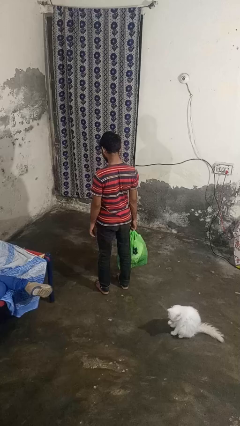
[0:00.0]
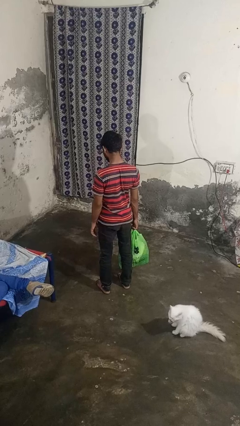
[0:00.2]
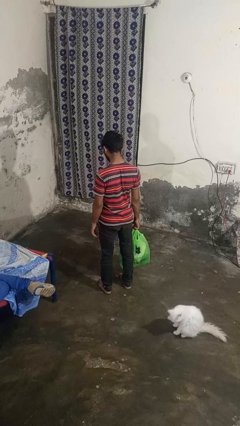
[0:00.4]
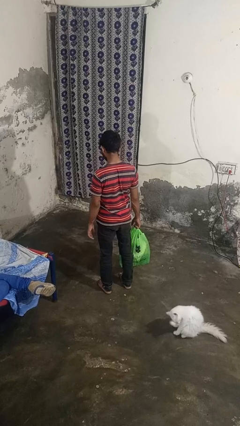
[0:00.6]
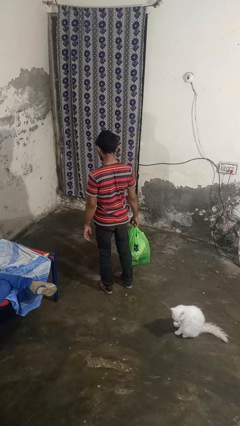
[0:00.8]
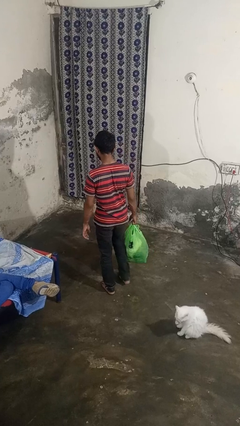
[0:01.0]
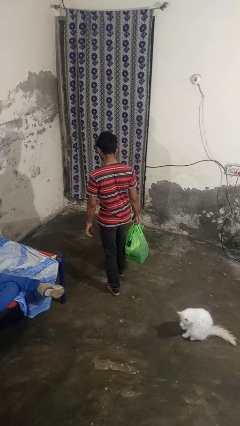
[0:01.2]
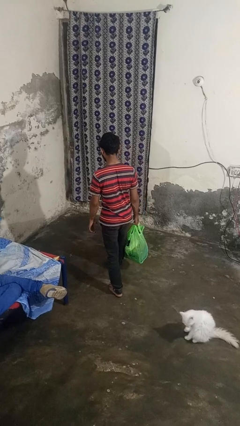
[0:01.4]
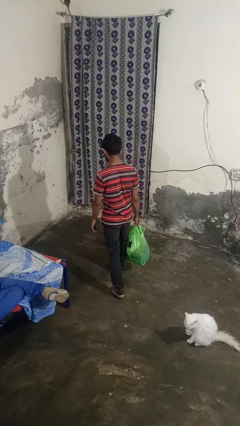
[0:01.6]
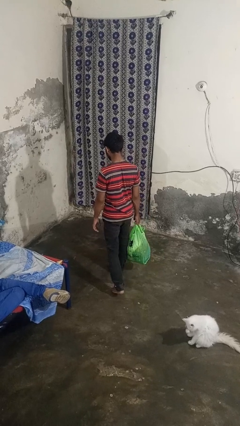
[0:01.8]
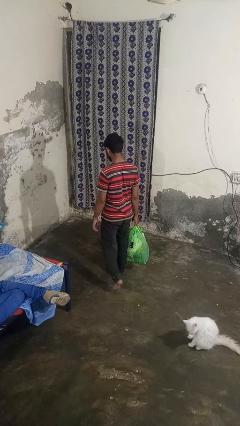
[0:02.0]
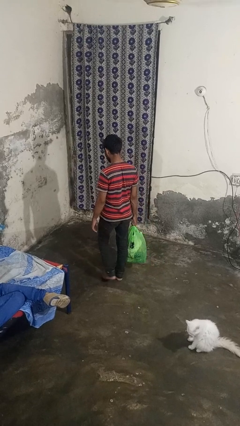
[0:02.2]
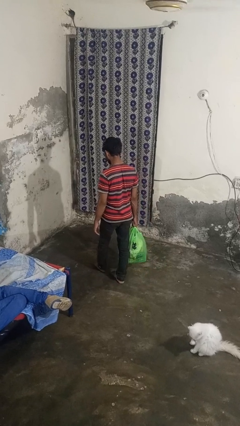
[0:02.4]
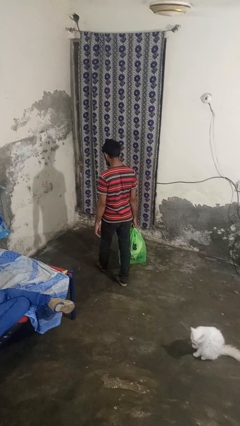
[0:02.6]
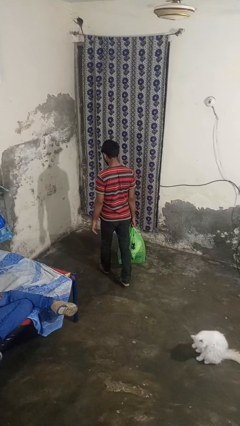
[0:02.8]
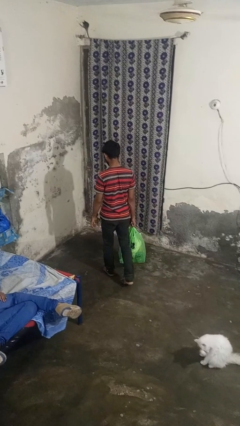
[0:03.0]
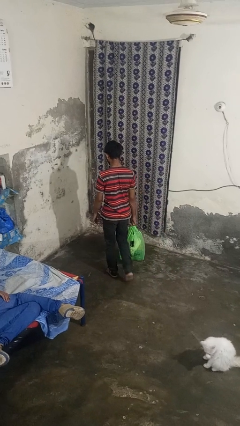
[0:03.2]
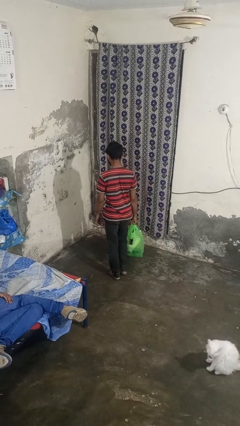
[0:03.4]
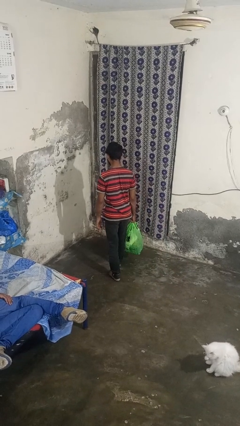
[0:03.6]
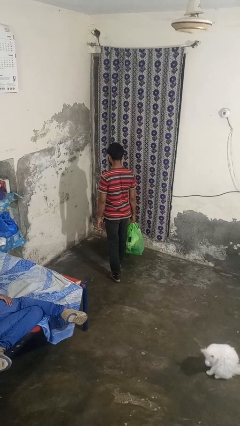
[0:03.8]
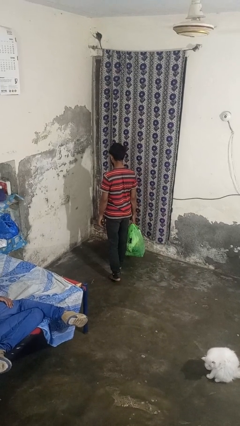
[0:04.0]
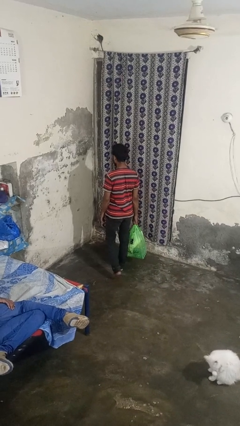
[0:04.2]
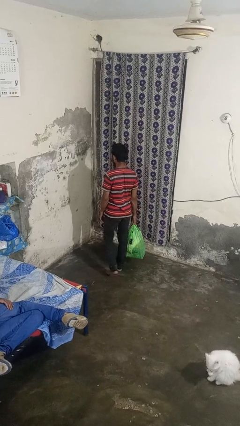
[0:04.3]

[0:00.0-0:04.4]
person carries groceries

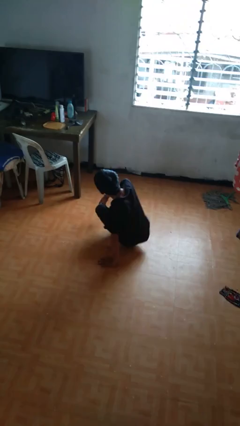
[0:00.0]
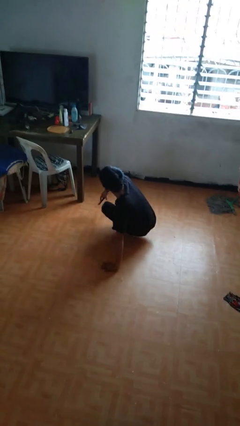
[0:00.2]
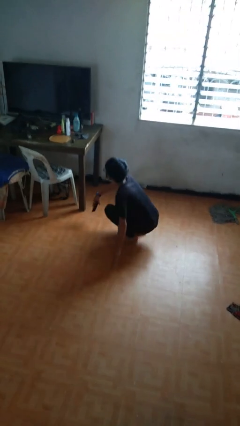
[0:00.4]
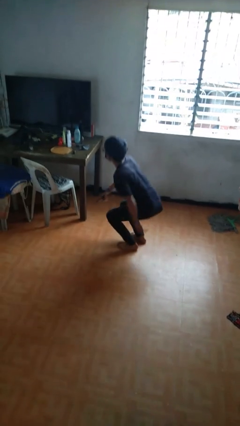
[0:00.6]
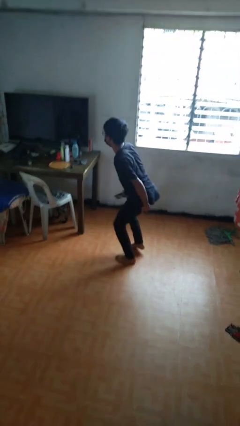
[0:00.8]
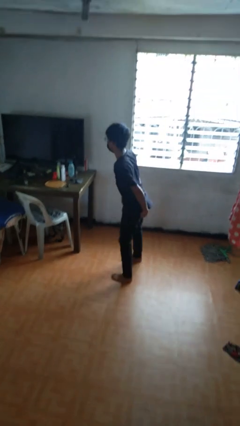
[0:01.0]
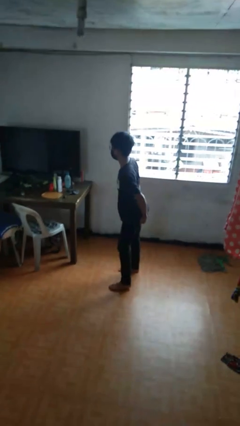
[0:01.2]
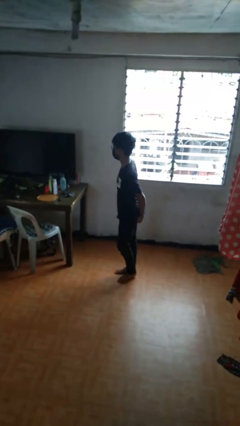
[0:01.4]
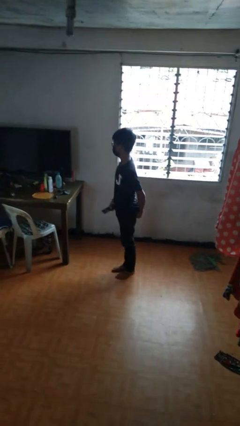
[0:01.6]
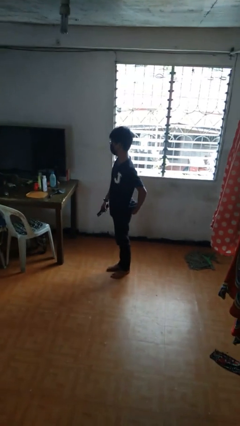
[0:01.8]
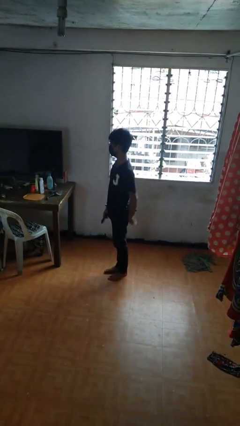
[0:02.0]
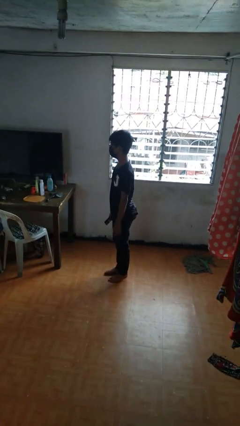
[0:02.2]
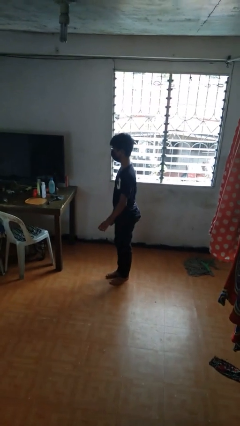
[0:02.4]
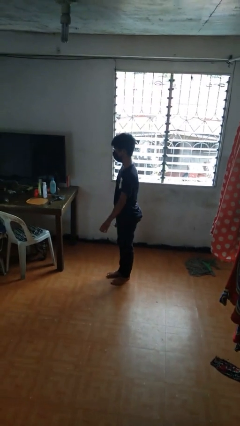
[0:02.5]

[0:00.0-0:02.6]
person stands up from floor

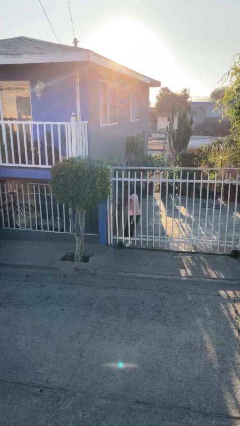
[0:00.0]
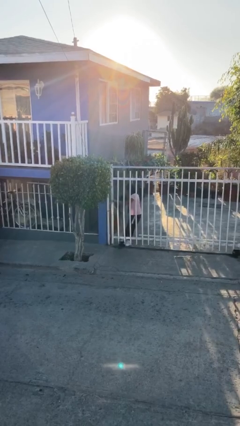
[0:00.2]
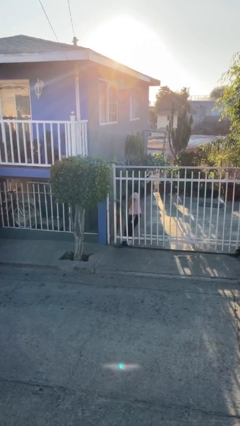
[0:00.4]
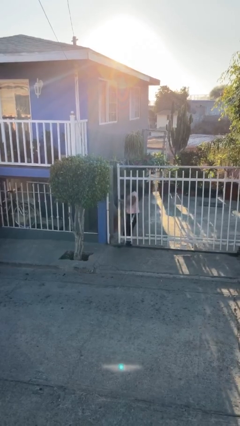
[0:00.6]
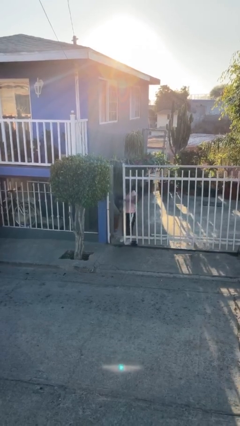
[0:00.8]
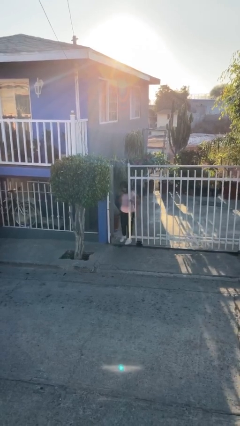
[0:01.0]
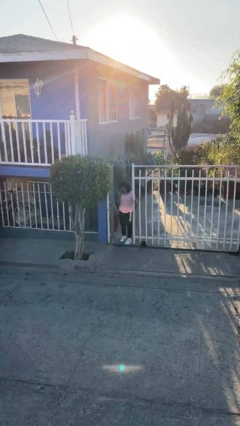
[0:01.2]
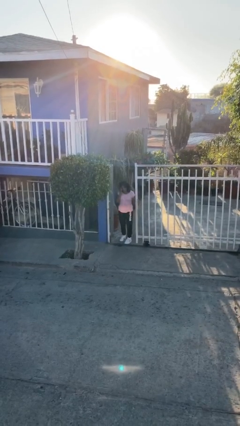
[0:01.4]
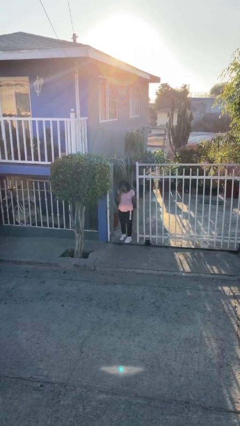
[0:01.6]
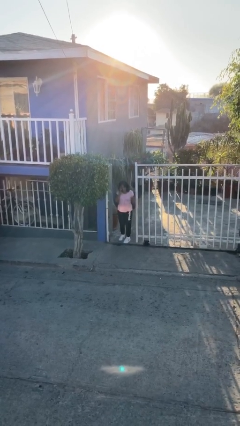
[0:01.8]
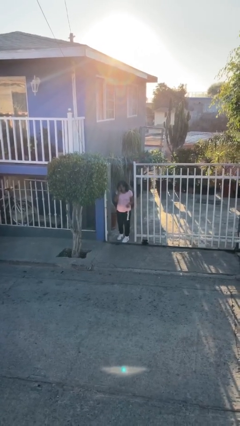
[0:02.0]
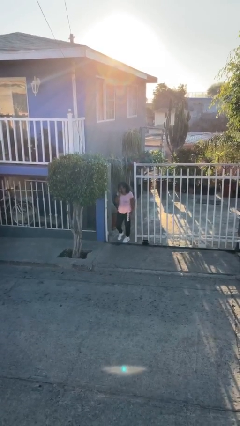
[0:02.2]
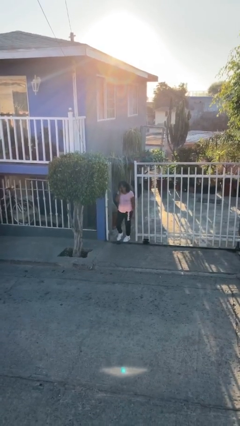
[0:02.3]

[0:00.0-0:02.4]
person opens facility door

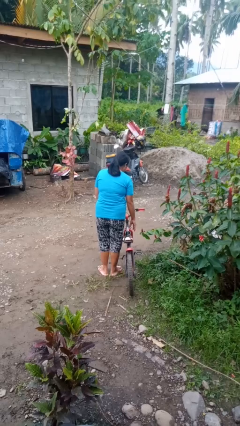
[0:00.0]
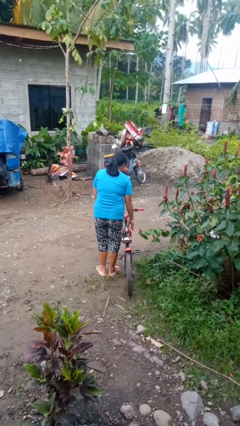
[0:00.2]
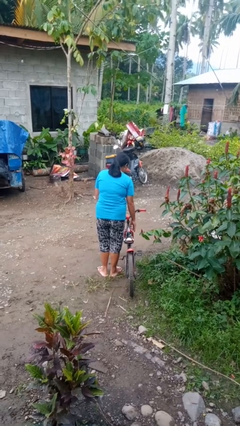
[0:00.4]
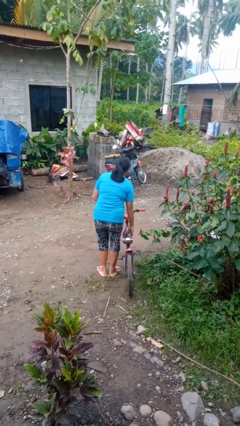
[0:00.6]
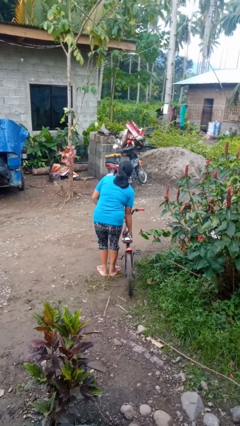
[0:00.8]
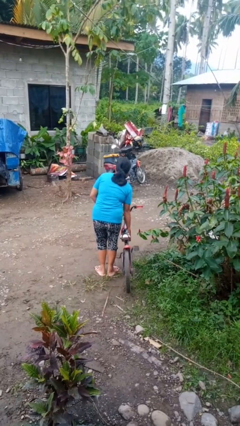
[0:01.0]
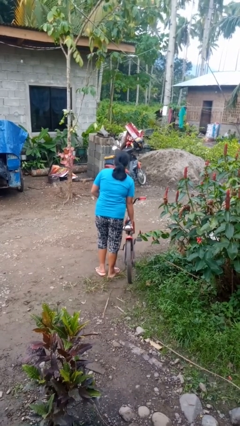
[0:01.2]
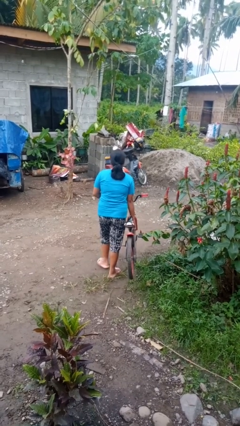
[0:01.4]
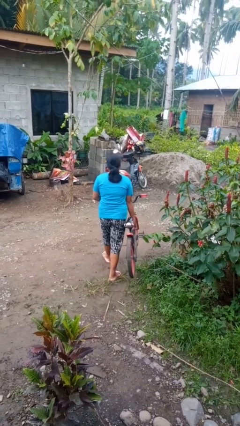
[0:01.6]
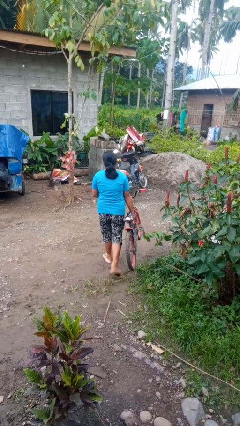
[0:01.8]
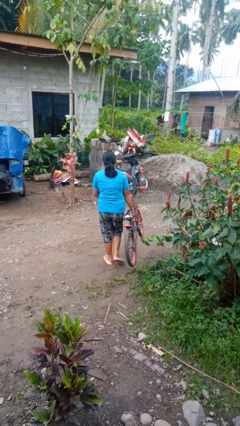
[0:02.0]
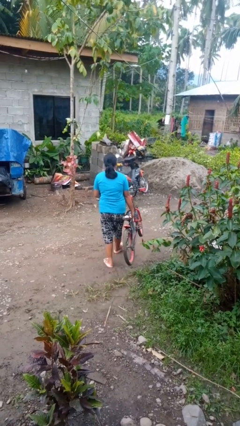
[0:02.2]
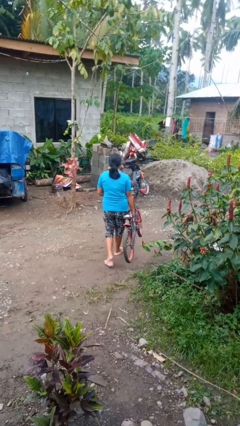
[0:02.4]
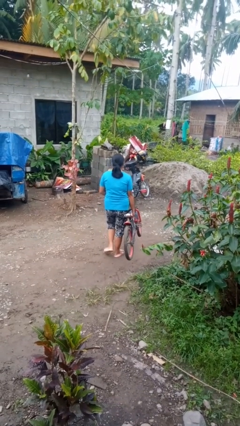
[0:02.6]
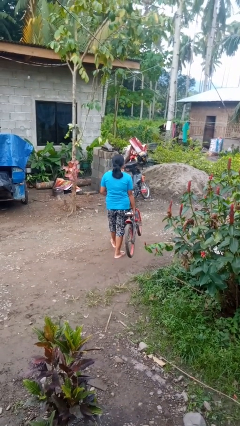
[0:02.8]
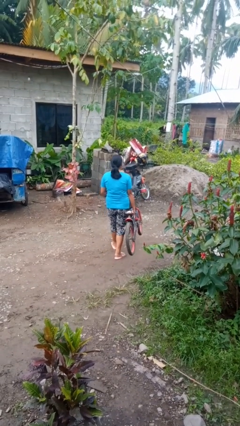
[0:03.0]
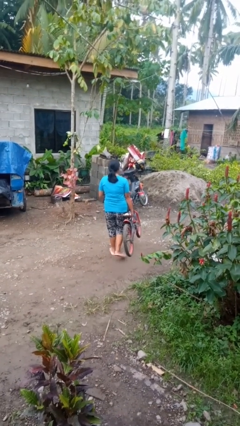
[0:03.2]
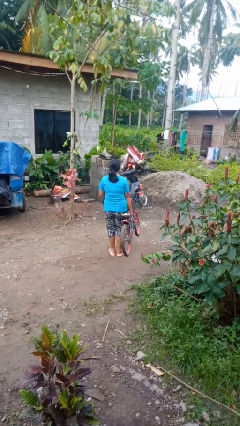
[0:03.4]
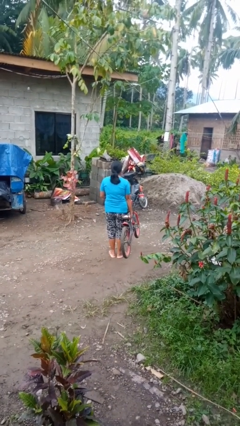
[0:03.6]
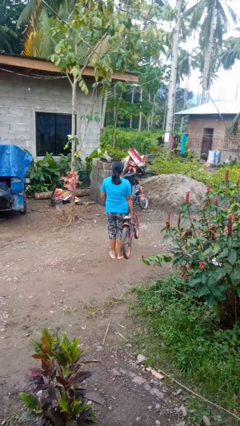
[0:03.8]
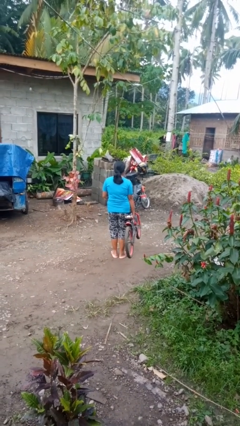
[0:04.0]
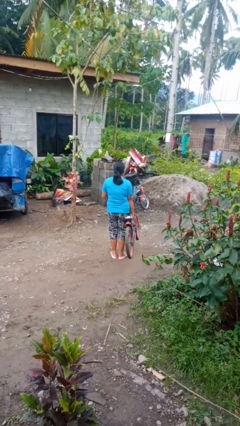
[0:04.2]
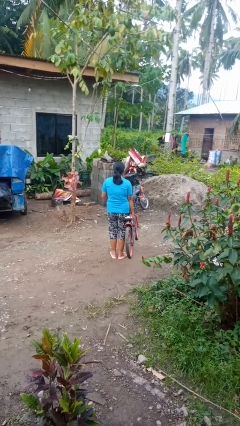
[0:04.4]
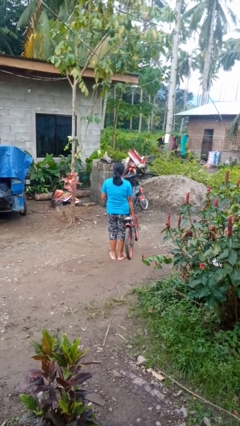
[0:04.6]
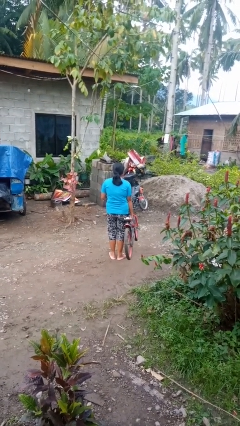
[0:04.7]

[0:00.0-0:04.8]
person carries bicycle

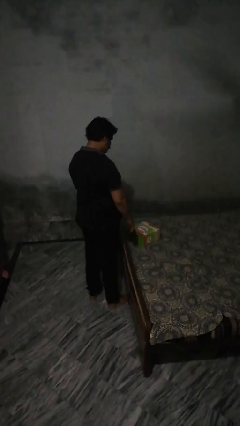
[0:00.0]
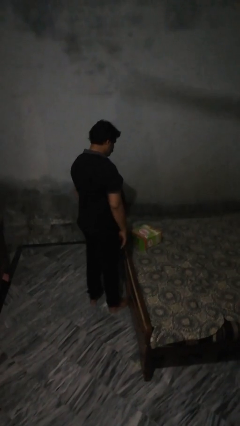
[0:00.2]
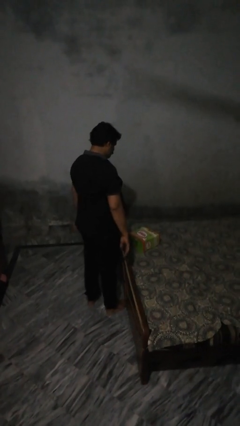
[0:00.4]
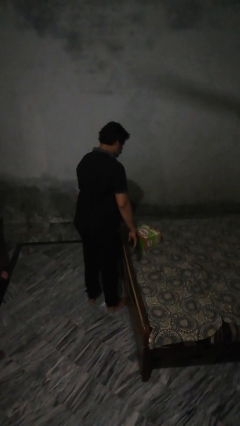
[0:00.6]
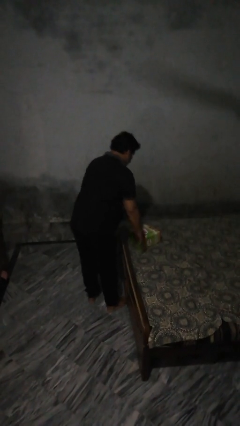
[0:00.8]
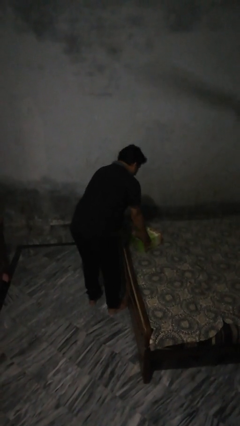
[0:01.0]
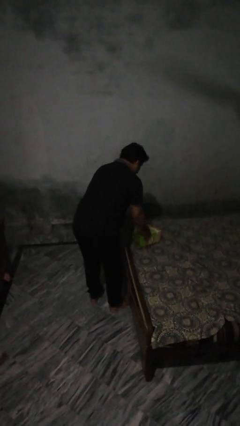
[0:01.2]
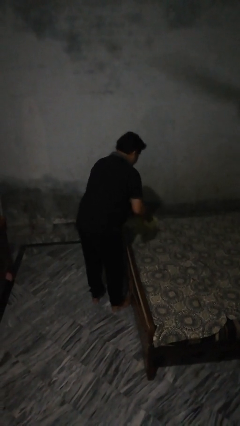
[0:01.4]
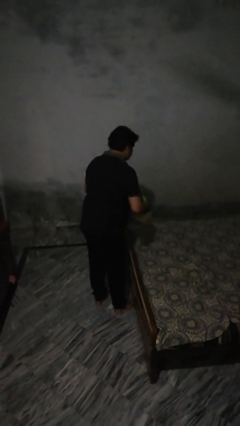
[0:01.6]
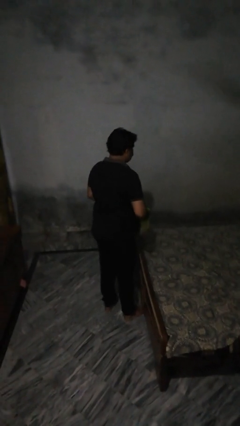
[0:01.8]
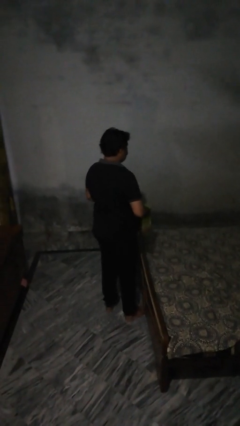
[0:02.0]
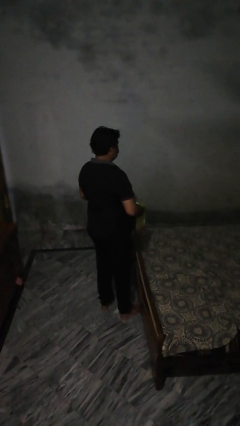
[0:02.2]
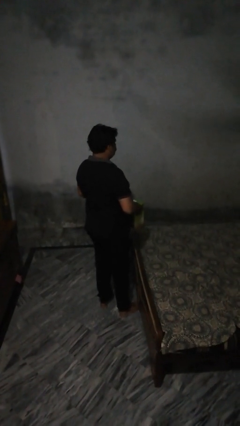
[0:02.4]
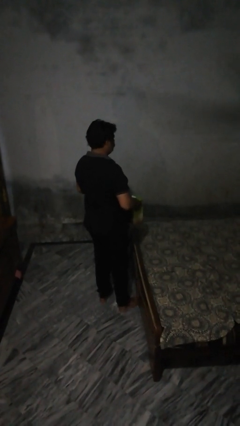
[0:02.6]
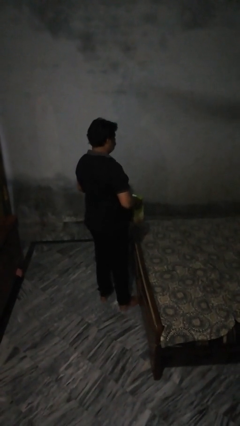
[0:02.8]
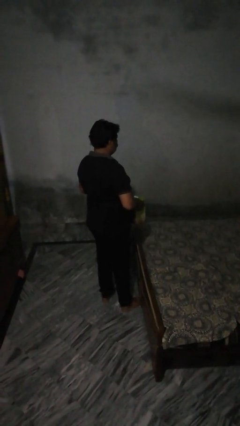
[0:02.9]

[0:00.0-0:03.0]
person picks up object from bed
